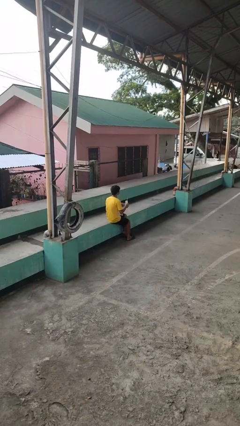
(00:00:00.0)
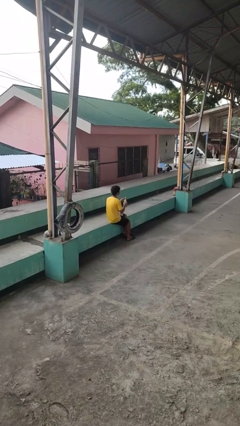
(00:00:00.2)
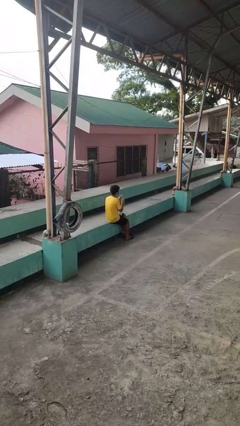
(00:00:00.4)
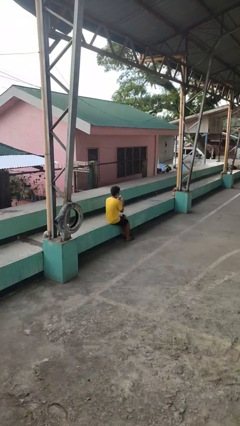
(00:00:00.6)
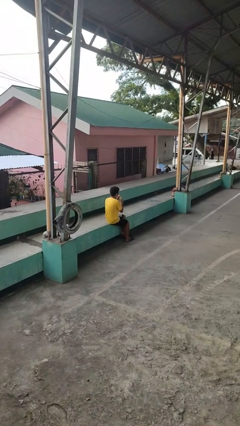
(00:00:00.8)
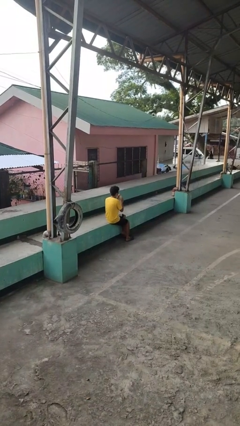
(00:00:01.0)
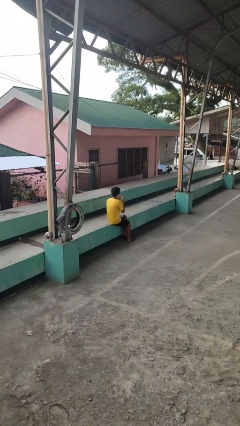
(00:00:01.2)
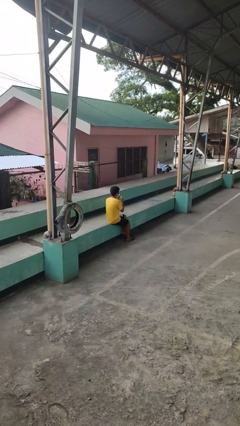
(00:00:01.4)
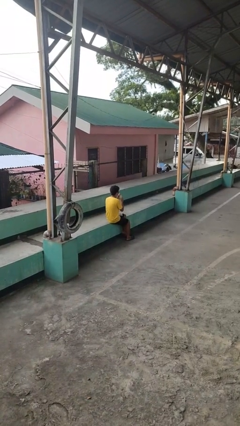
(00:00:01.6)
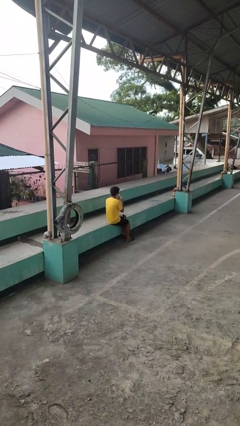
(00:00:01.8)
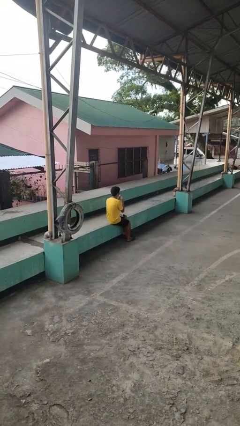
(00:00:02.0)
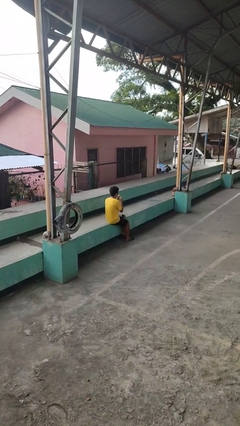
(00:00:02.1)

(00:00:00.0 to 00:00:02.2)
person drinks from straw

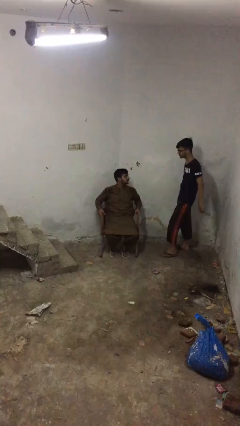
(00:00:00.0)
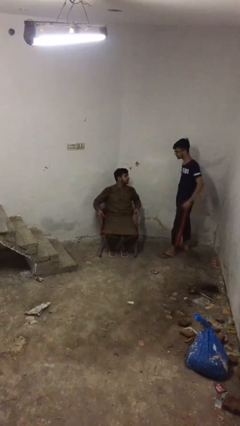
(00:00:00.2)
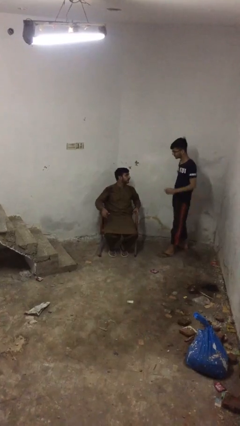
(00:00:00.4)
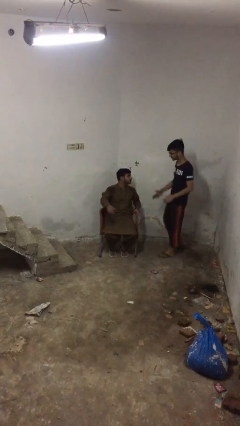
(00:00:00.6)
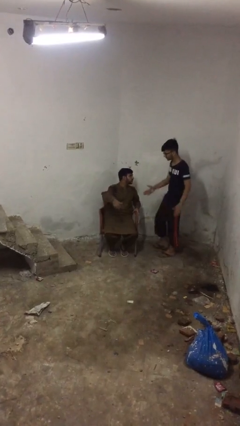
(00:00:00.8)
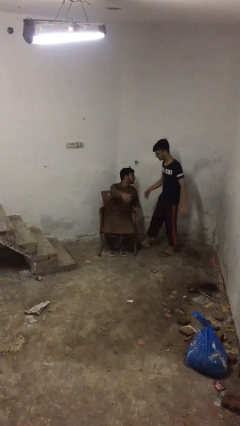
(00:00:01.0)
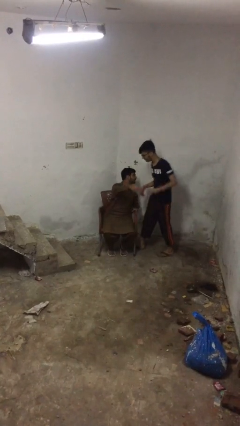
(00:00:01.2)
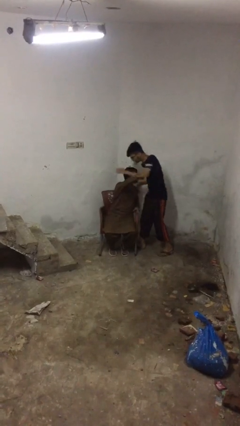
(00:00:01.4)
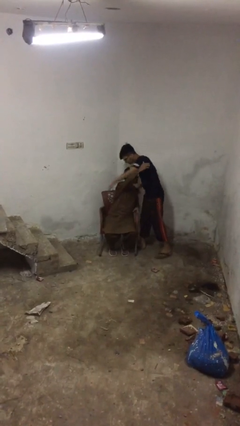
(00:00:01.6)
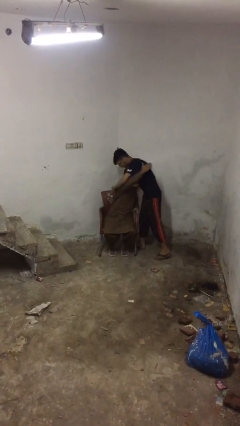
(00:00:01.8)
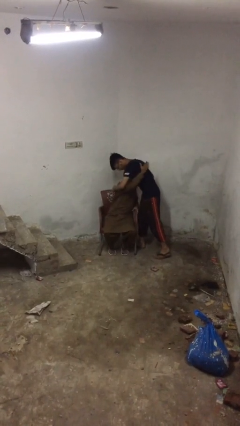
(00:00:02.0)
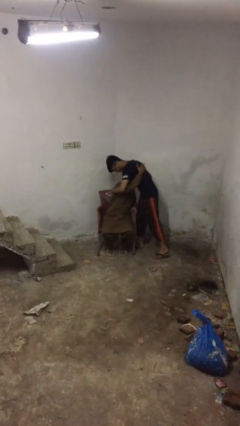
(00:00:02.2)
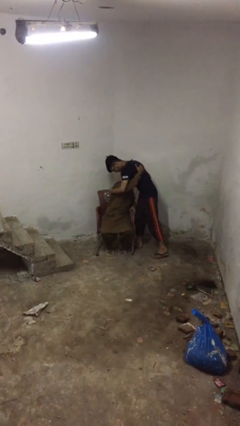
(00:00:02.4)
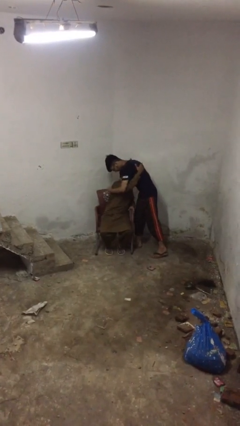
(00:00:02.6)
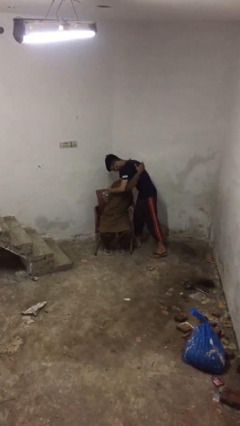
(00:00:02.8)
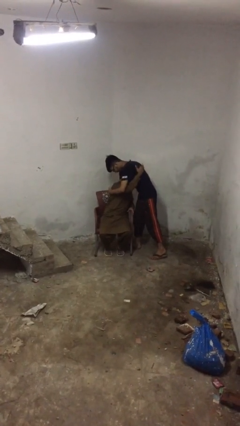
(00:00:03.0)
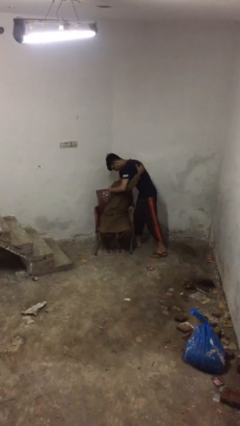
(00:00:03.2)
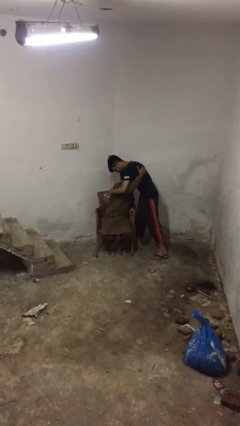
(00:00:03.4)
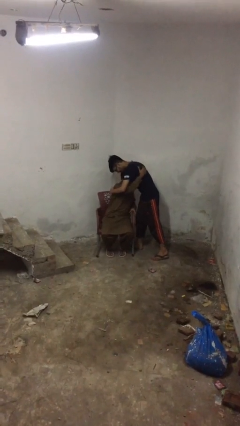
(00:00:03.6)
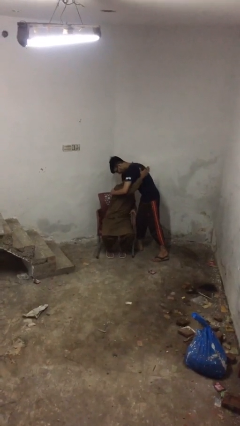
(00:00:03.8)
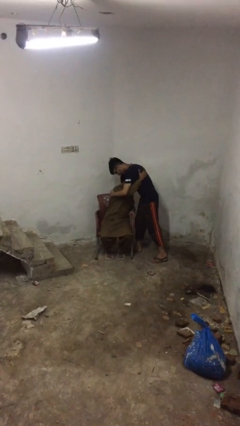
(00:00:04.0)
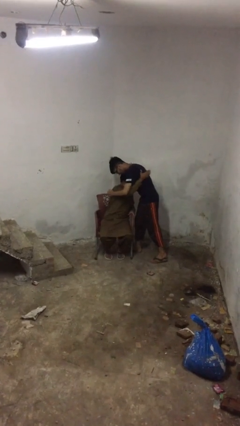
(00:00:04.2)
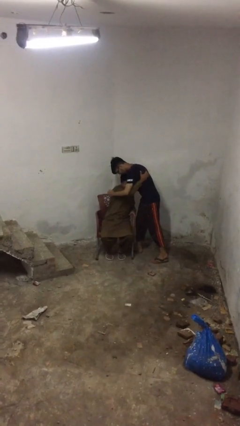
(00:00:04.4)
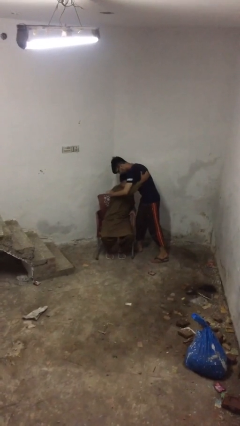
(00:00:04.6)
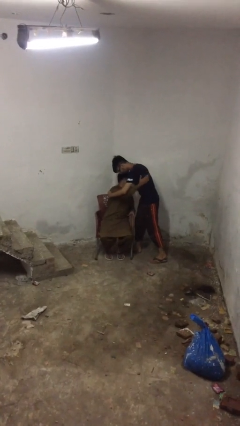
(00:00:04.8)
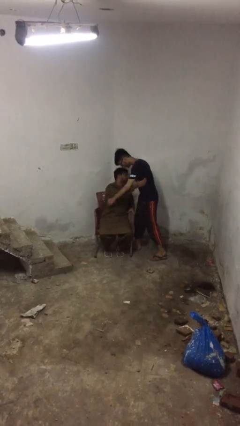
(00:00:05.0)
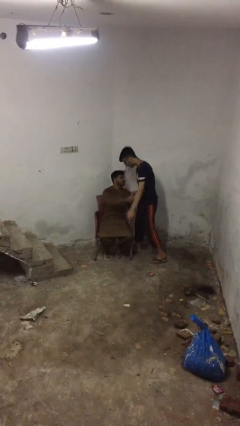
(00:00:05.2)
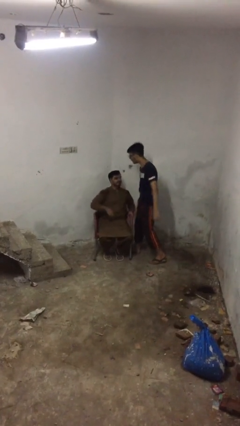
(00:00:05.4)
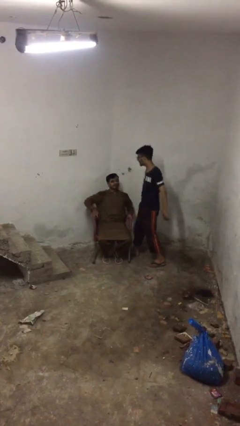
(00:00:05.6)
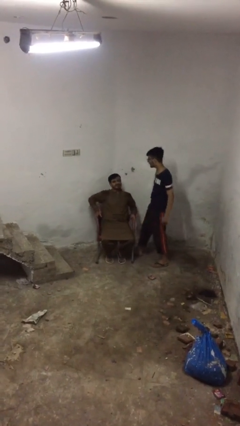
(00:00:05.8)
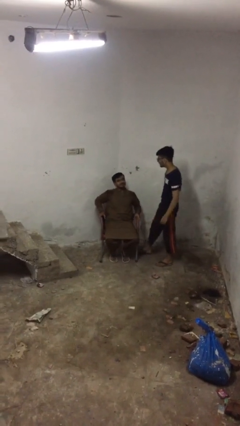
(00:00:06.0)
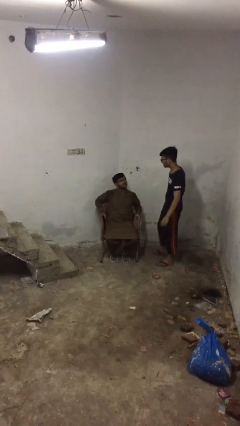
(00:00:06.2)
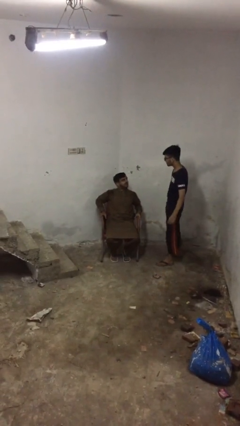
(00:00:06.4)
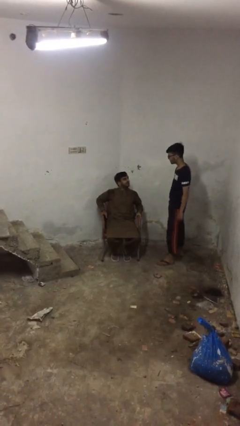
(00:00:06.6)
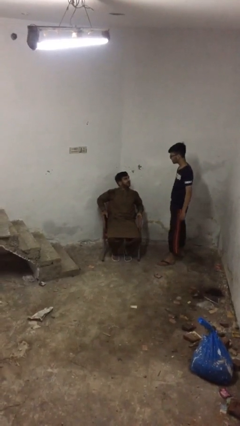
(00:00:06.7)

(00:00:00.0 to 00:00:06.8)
person embraces person

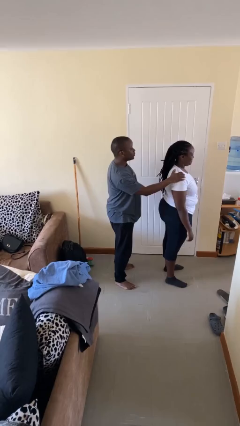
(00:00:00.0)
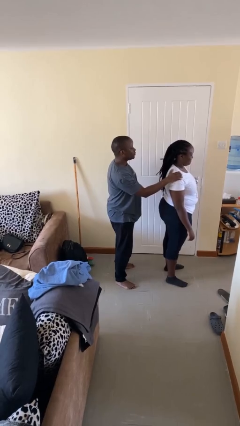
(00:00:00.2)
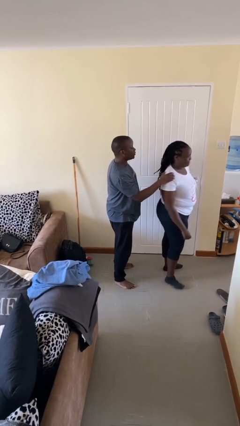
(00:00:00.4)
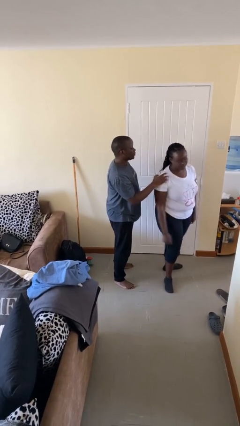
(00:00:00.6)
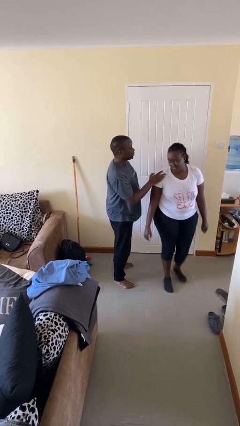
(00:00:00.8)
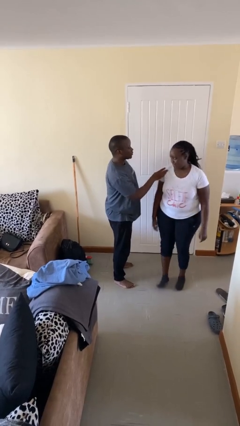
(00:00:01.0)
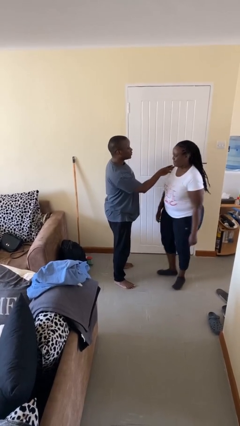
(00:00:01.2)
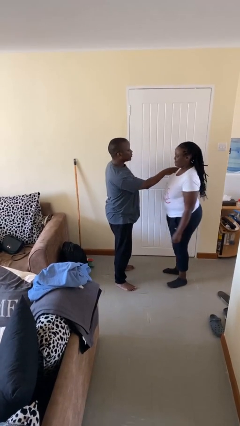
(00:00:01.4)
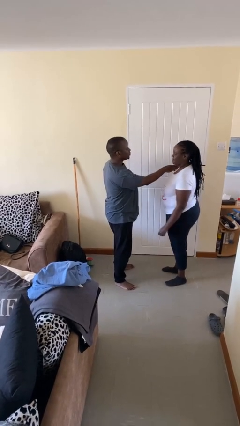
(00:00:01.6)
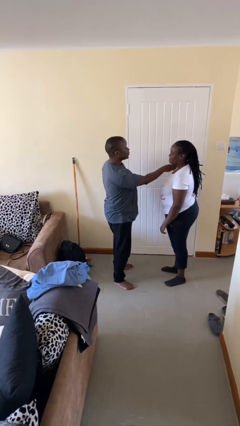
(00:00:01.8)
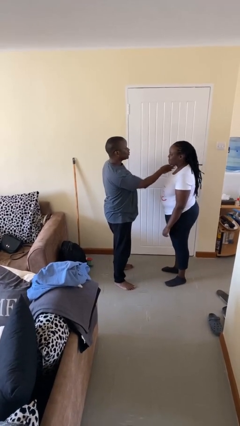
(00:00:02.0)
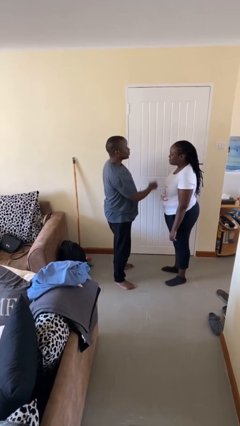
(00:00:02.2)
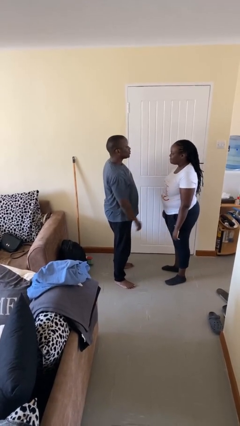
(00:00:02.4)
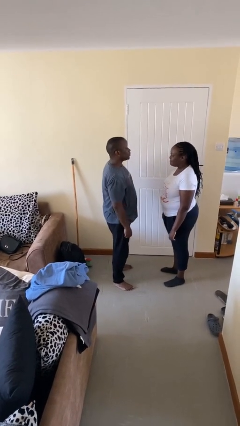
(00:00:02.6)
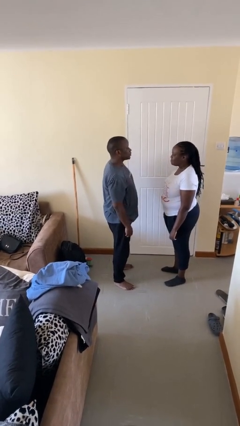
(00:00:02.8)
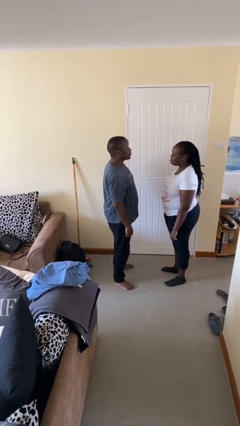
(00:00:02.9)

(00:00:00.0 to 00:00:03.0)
person spins person around

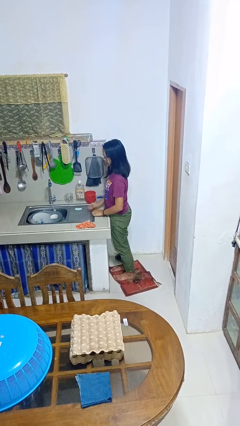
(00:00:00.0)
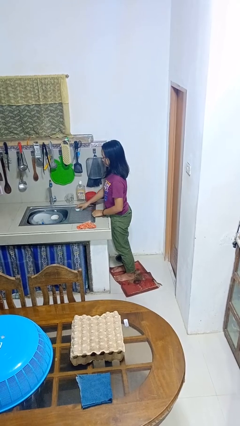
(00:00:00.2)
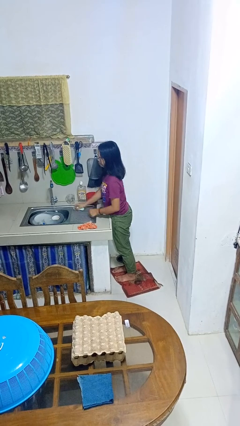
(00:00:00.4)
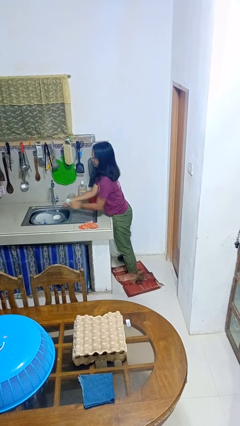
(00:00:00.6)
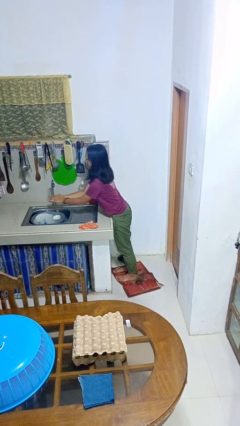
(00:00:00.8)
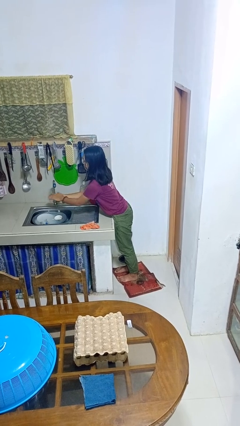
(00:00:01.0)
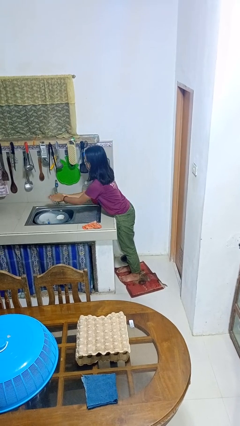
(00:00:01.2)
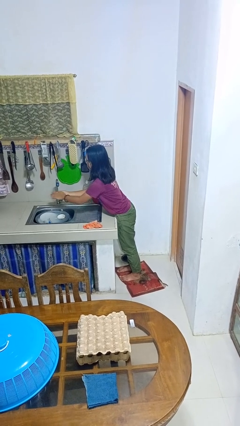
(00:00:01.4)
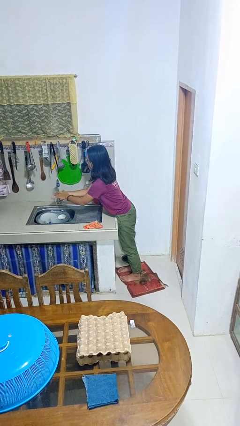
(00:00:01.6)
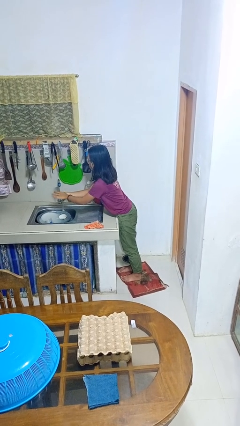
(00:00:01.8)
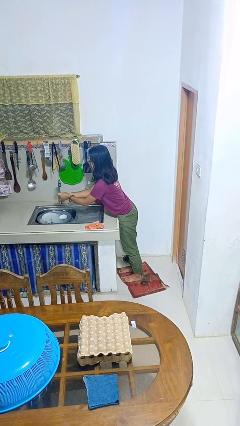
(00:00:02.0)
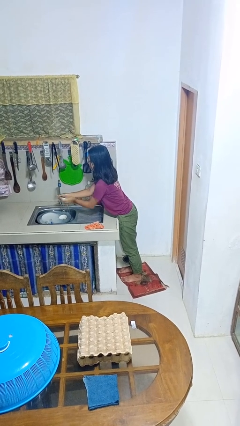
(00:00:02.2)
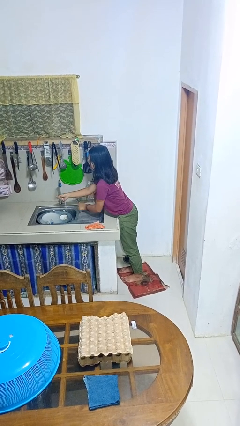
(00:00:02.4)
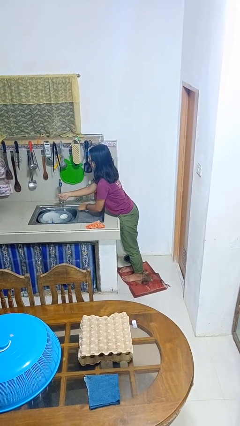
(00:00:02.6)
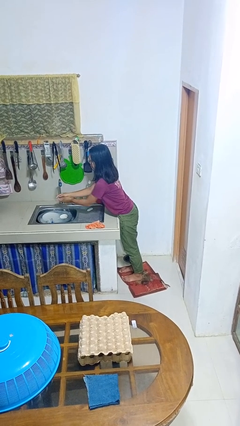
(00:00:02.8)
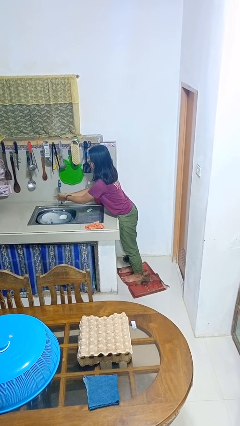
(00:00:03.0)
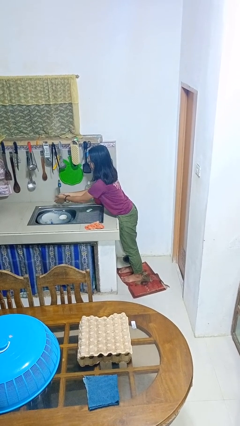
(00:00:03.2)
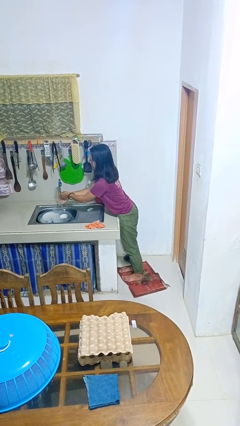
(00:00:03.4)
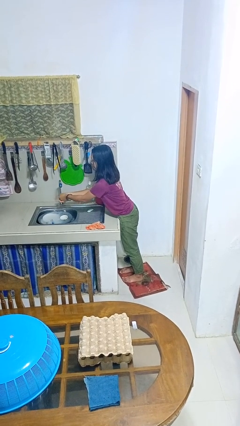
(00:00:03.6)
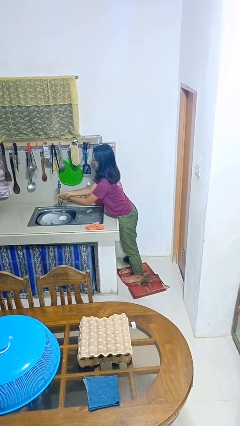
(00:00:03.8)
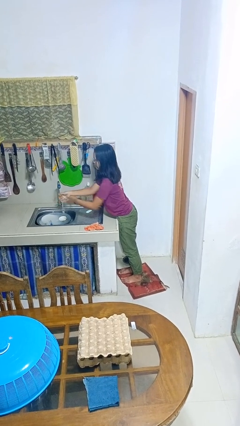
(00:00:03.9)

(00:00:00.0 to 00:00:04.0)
person washes hands

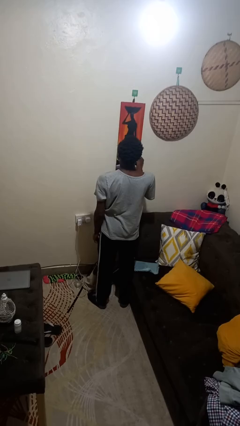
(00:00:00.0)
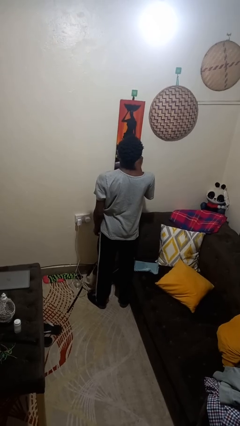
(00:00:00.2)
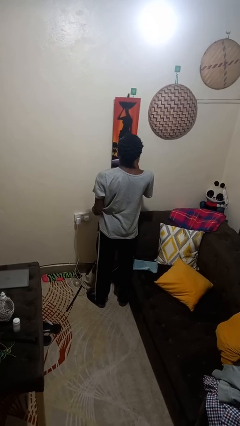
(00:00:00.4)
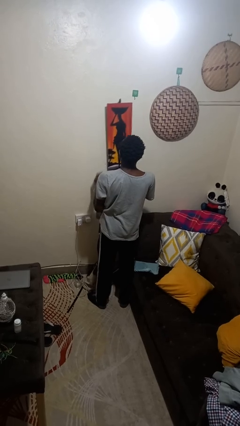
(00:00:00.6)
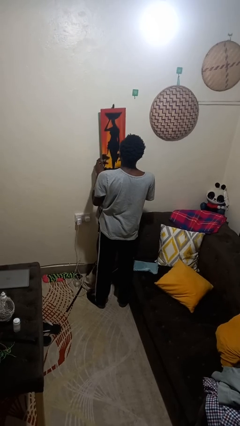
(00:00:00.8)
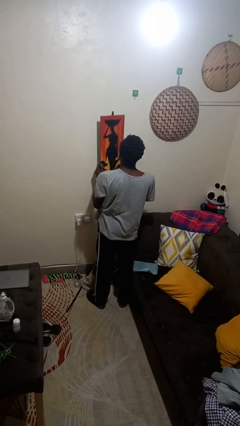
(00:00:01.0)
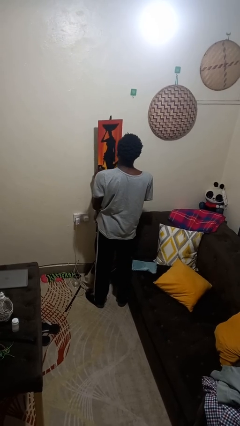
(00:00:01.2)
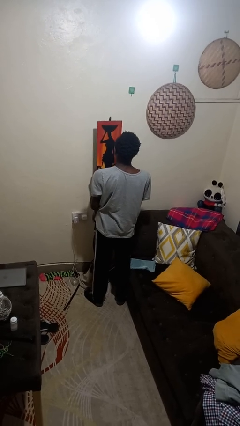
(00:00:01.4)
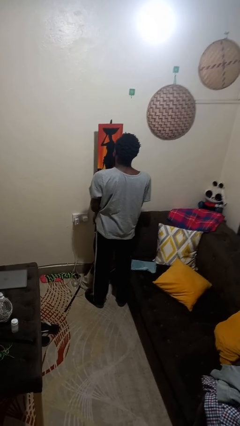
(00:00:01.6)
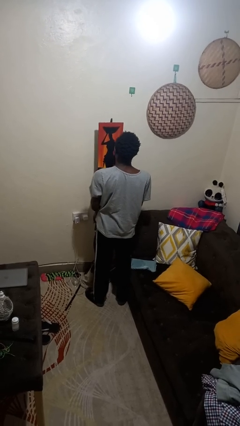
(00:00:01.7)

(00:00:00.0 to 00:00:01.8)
person takes down picture frame
